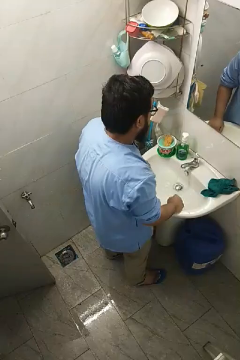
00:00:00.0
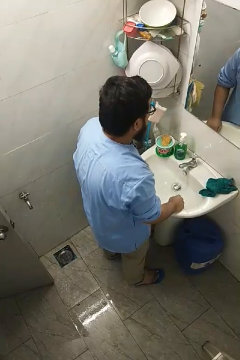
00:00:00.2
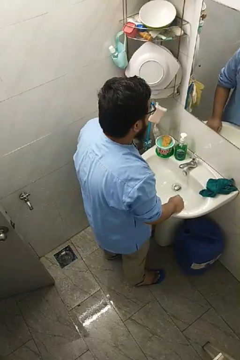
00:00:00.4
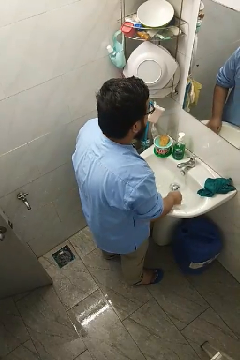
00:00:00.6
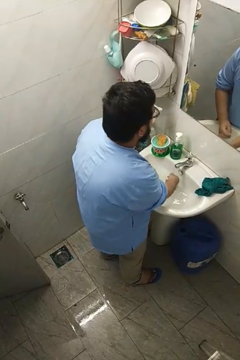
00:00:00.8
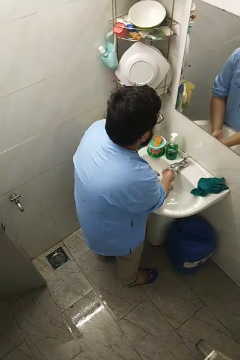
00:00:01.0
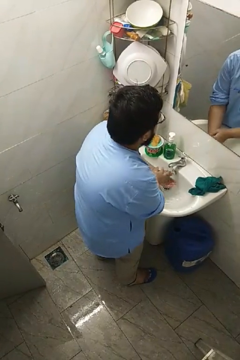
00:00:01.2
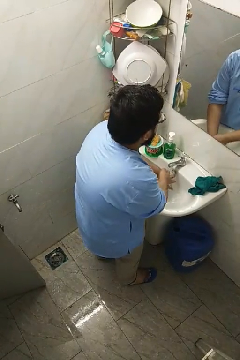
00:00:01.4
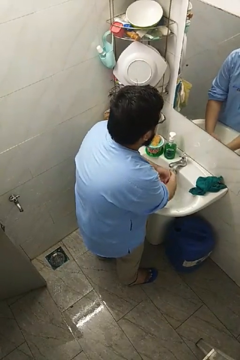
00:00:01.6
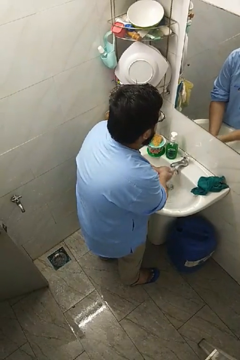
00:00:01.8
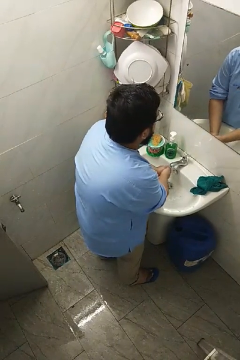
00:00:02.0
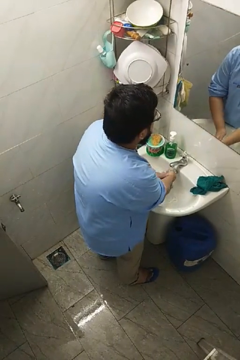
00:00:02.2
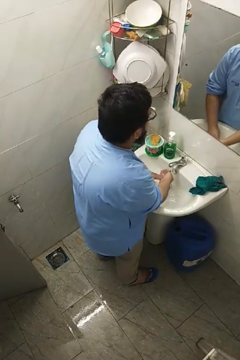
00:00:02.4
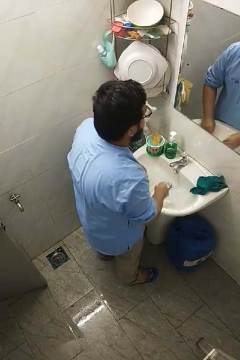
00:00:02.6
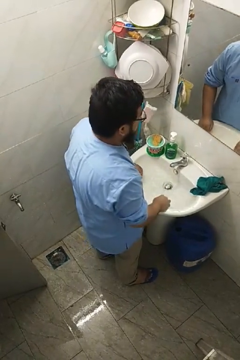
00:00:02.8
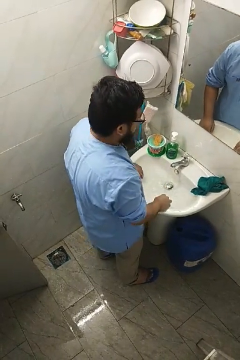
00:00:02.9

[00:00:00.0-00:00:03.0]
person washes hands

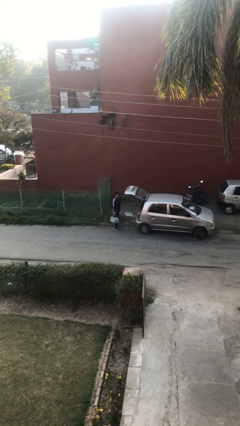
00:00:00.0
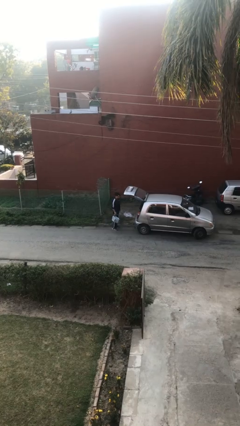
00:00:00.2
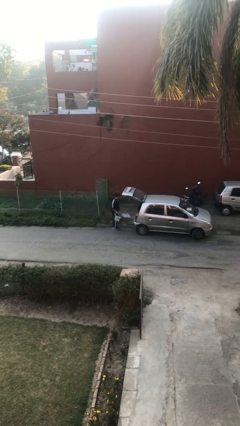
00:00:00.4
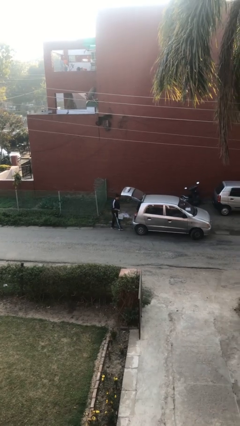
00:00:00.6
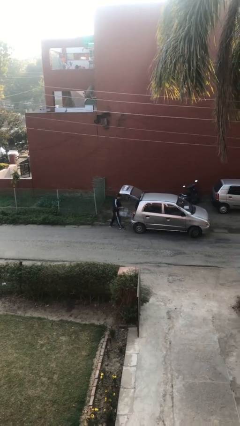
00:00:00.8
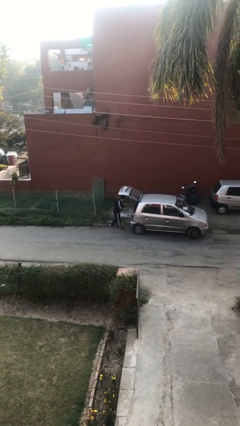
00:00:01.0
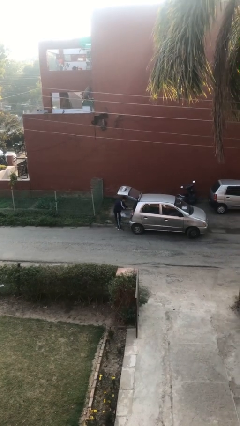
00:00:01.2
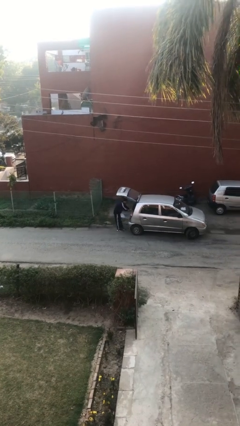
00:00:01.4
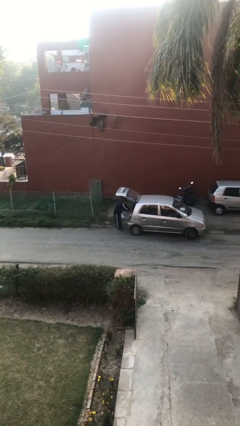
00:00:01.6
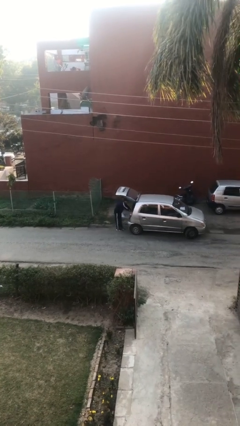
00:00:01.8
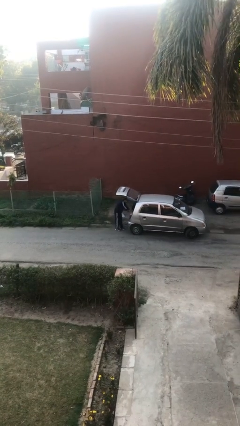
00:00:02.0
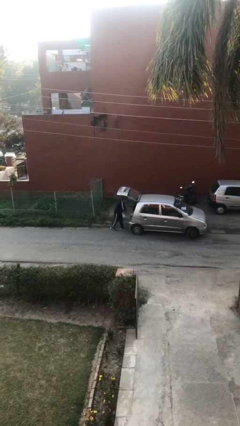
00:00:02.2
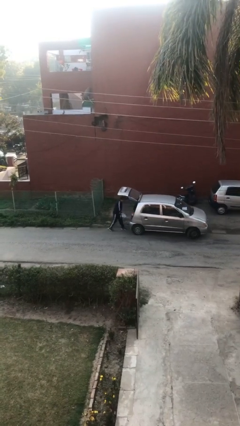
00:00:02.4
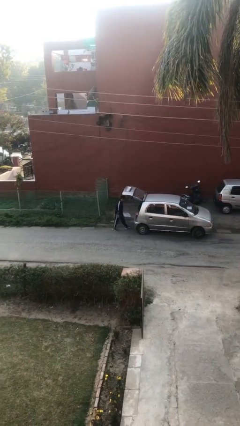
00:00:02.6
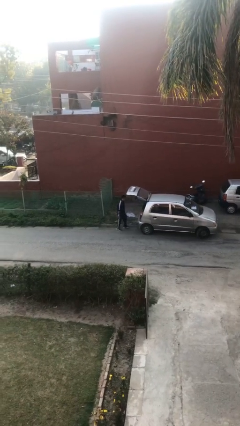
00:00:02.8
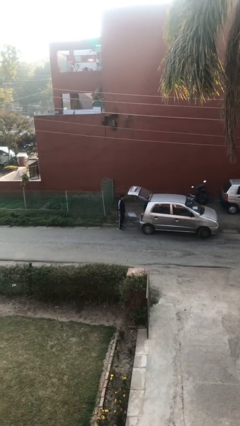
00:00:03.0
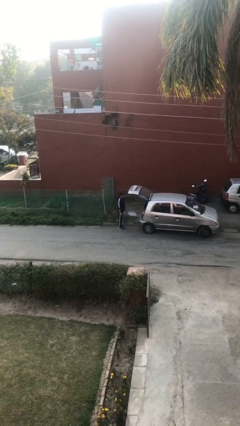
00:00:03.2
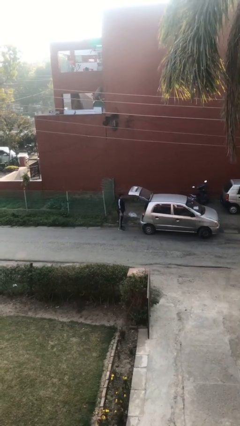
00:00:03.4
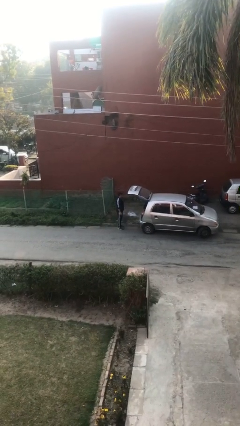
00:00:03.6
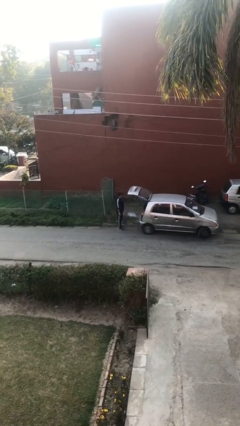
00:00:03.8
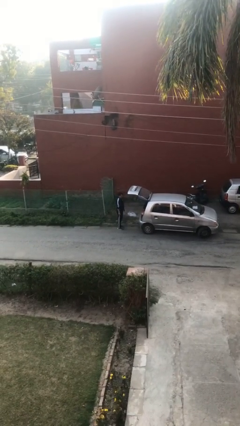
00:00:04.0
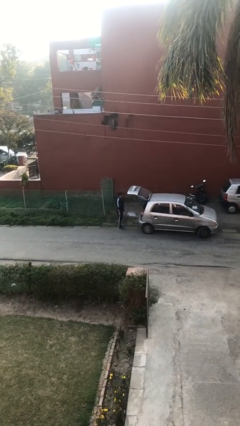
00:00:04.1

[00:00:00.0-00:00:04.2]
person loads car

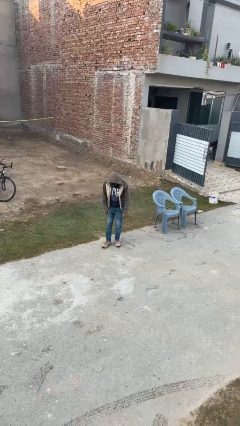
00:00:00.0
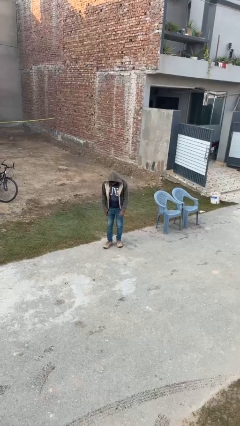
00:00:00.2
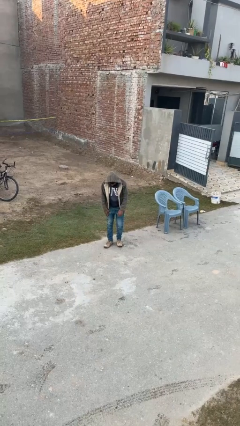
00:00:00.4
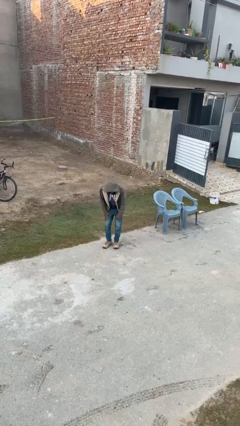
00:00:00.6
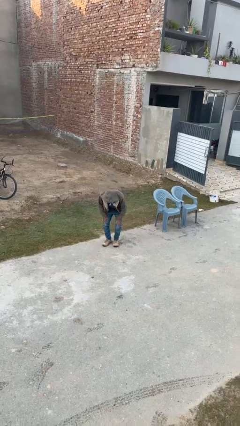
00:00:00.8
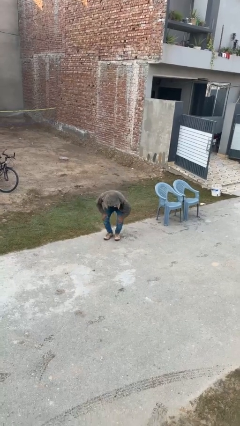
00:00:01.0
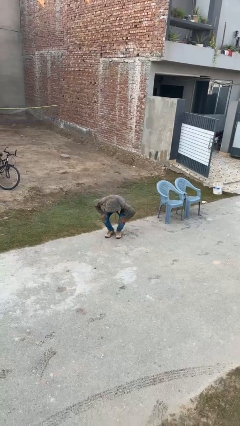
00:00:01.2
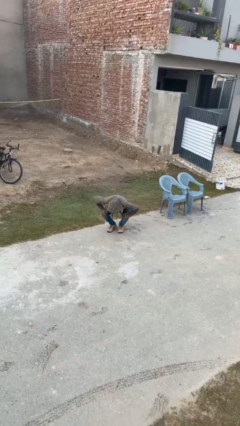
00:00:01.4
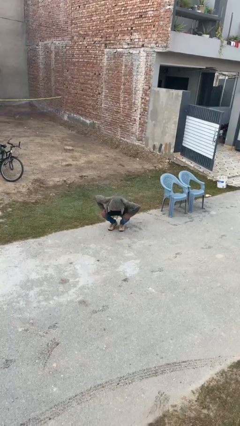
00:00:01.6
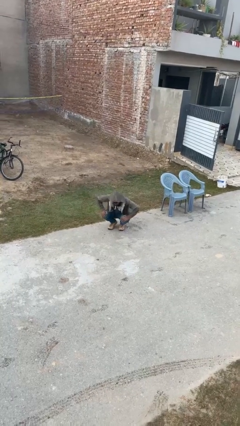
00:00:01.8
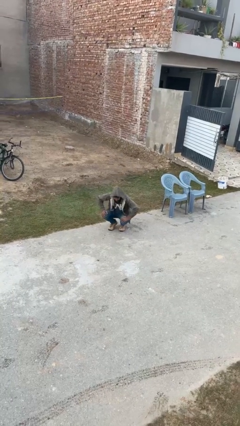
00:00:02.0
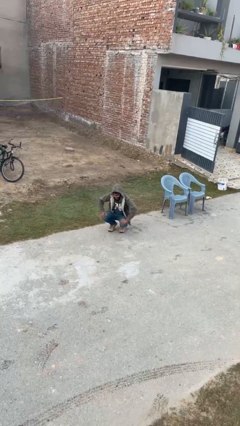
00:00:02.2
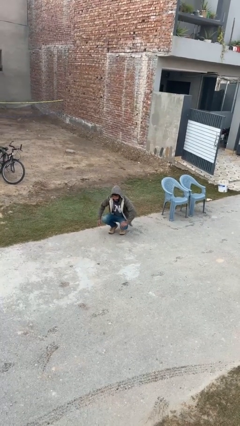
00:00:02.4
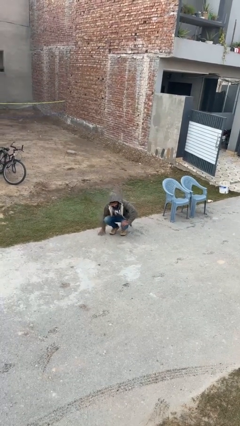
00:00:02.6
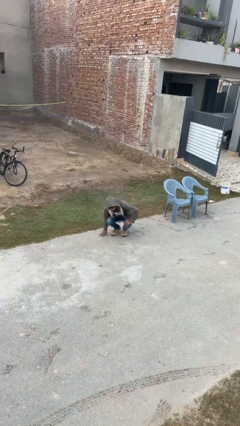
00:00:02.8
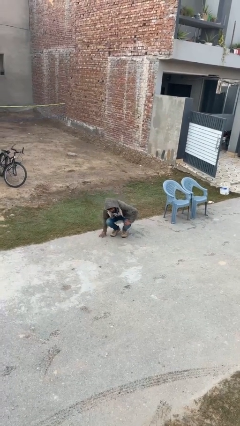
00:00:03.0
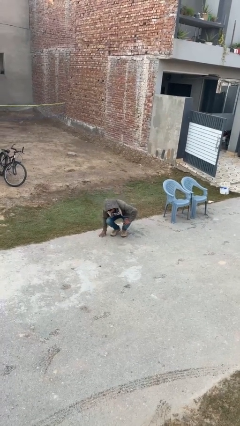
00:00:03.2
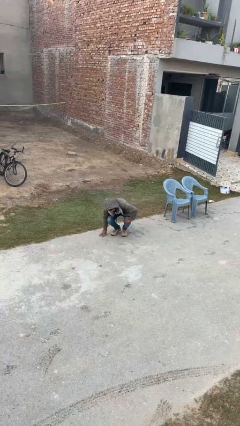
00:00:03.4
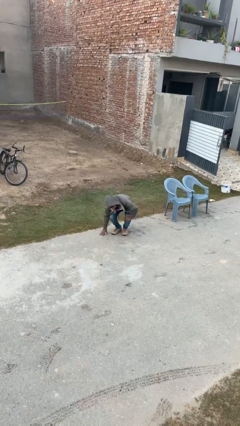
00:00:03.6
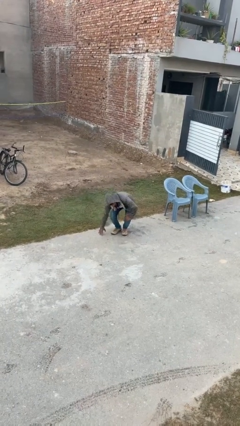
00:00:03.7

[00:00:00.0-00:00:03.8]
person sits down

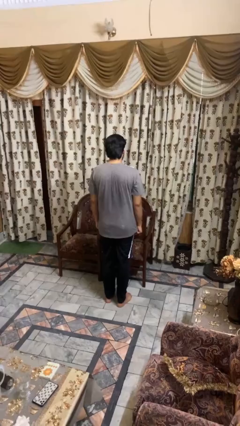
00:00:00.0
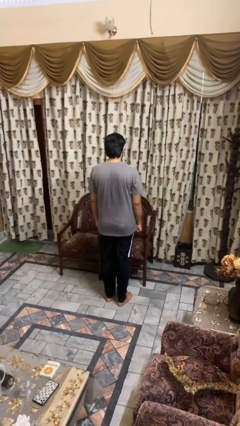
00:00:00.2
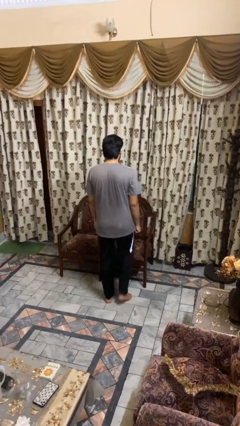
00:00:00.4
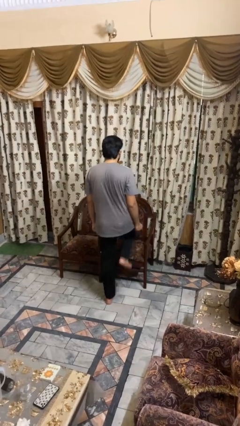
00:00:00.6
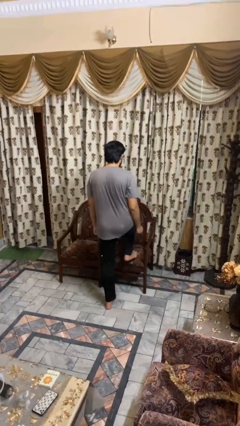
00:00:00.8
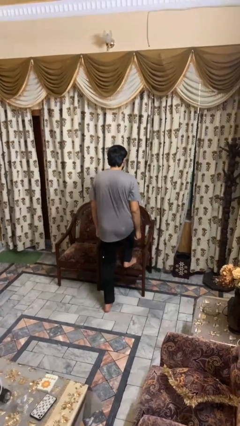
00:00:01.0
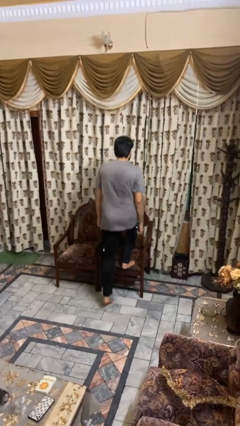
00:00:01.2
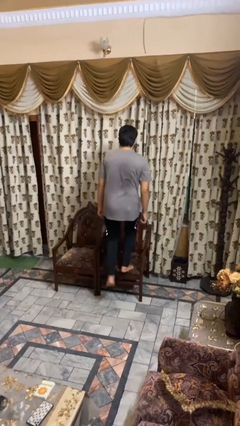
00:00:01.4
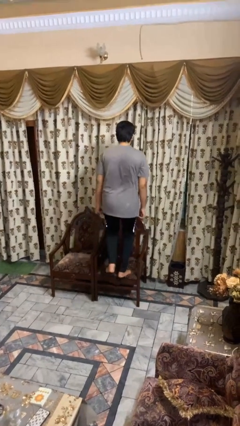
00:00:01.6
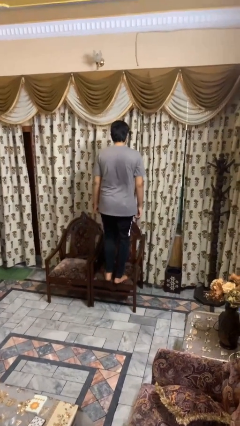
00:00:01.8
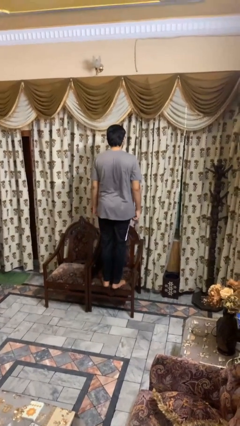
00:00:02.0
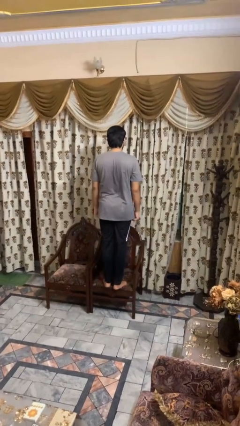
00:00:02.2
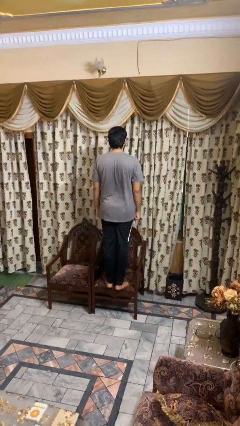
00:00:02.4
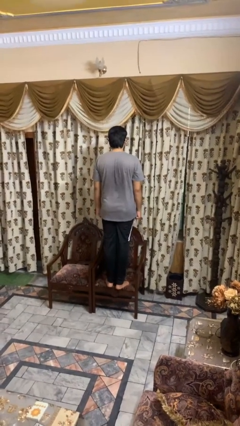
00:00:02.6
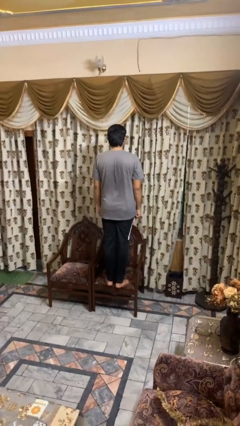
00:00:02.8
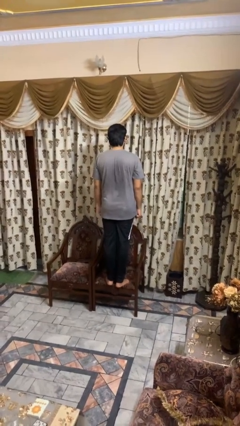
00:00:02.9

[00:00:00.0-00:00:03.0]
person climbs on chair

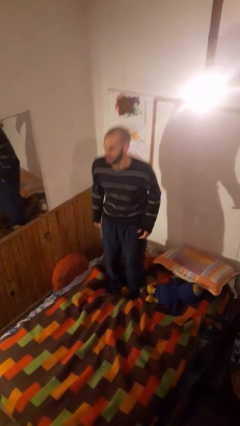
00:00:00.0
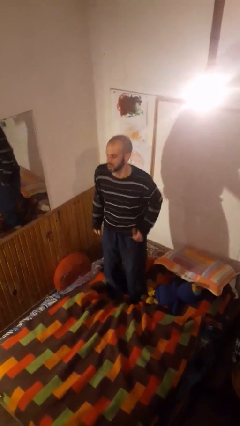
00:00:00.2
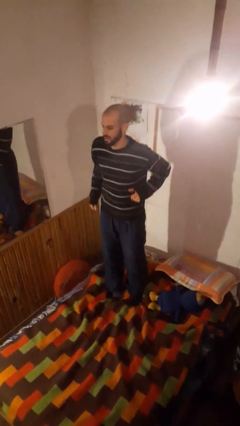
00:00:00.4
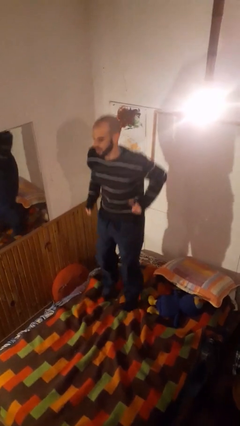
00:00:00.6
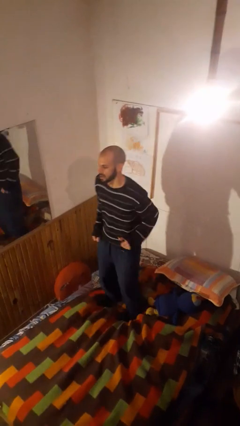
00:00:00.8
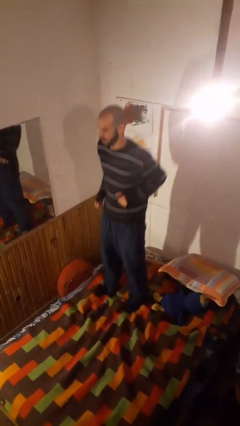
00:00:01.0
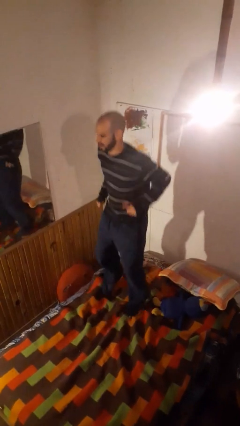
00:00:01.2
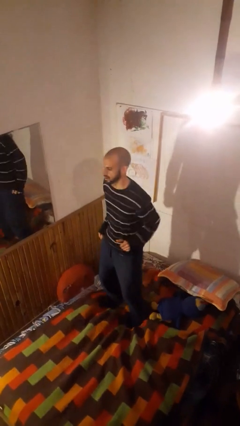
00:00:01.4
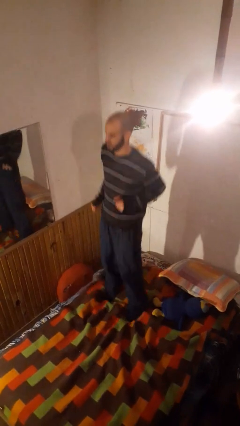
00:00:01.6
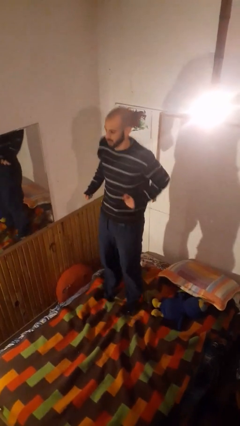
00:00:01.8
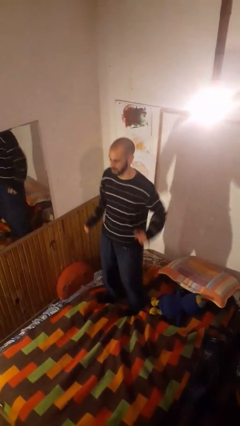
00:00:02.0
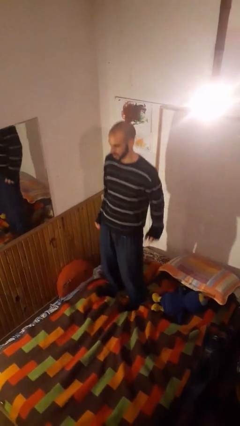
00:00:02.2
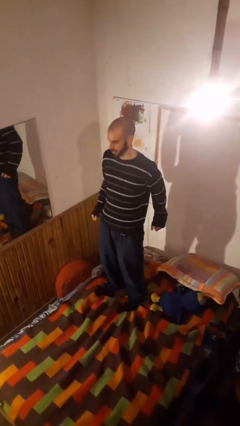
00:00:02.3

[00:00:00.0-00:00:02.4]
person jumps on bed

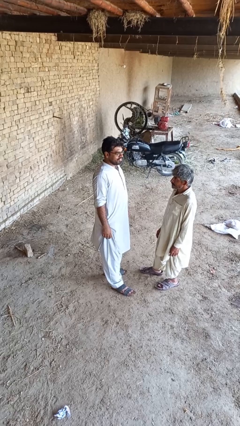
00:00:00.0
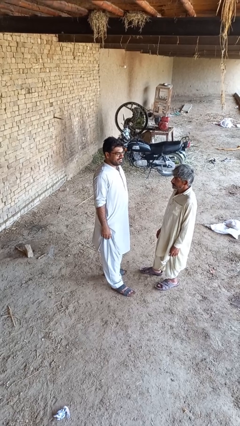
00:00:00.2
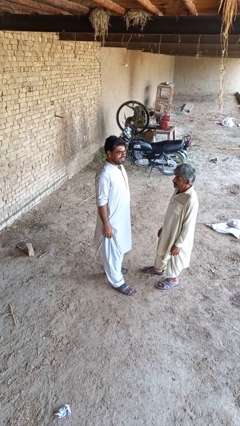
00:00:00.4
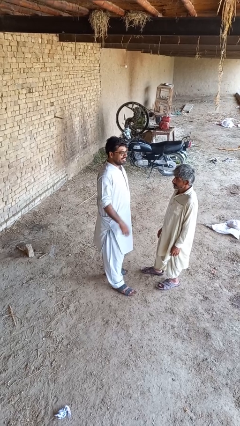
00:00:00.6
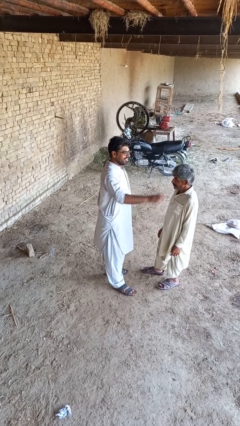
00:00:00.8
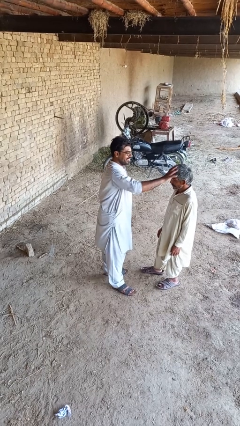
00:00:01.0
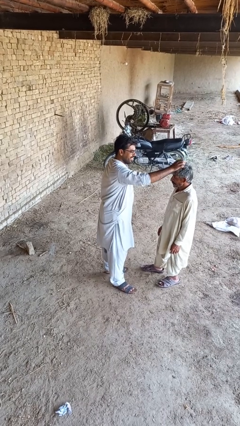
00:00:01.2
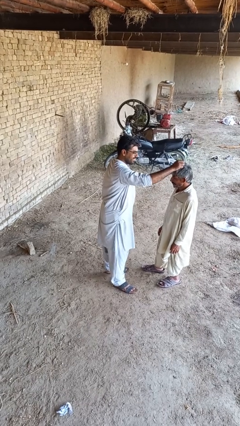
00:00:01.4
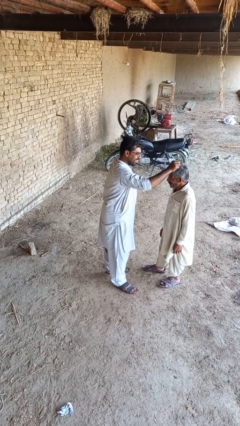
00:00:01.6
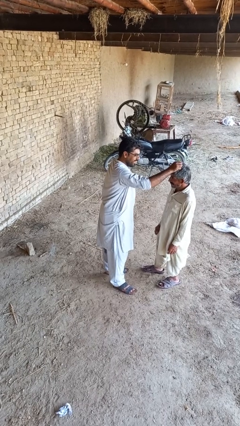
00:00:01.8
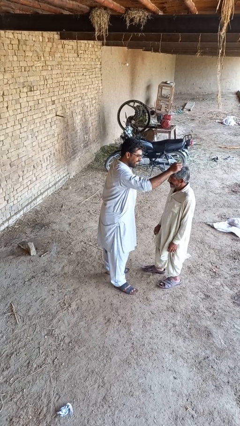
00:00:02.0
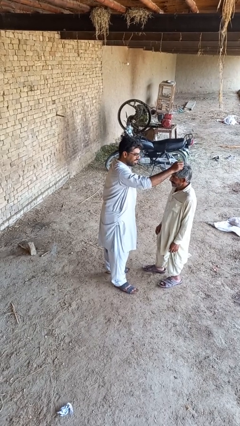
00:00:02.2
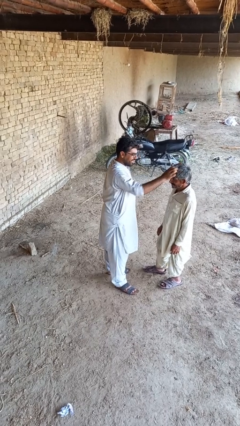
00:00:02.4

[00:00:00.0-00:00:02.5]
person grabs person by hair
